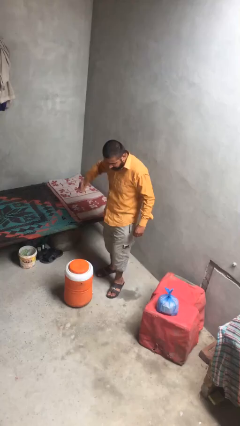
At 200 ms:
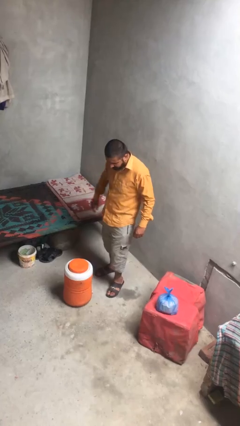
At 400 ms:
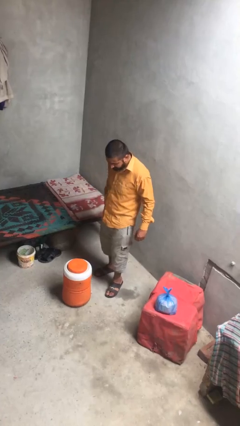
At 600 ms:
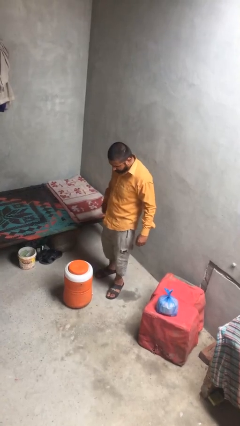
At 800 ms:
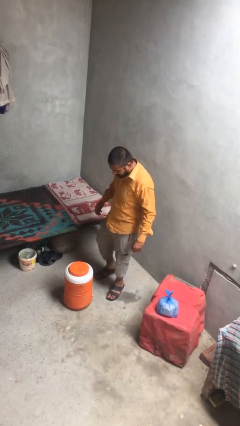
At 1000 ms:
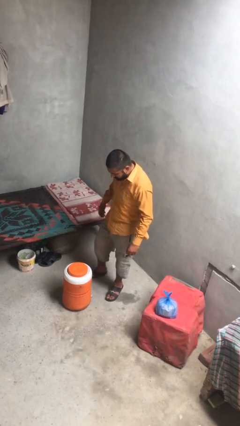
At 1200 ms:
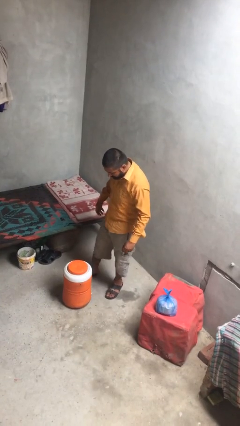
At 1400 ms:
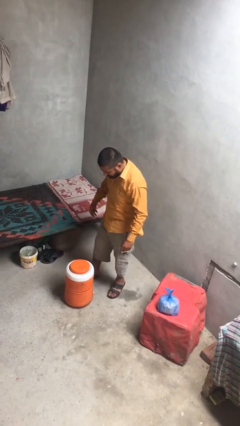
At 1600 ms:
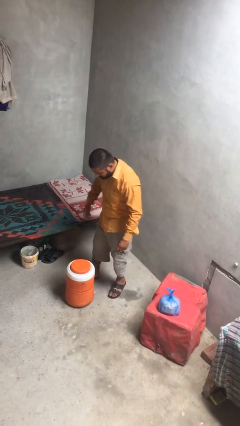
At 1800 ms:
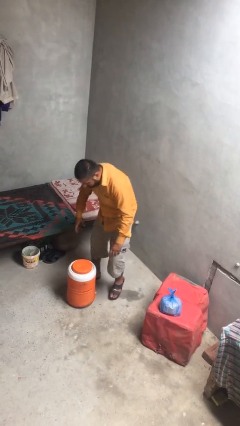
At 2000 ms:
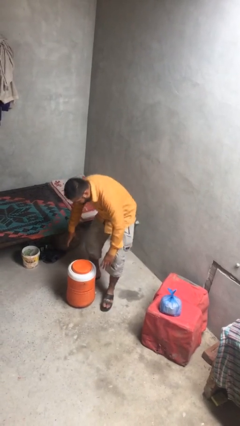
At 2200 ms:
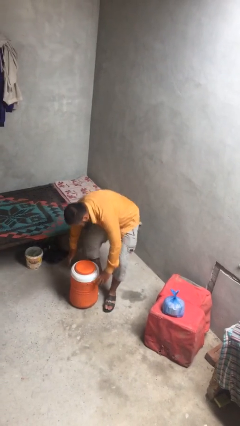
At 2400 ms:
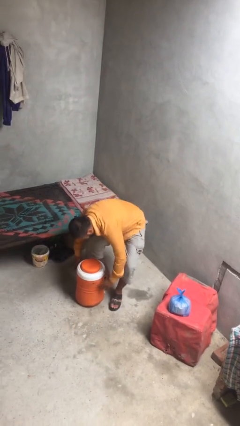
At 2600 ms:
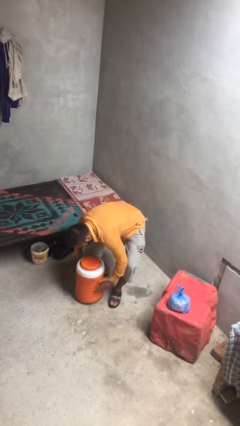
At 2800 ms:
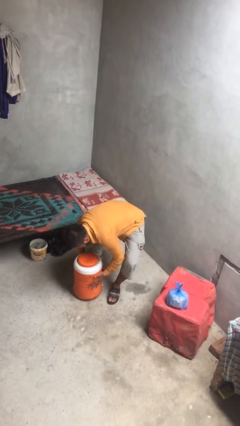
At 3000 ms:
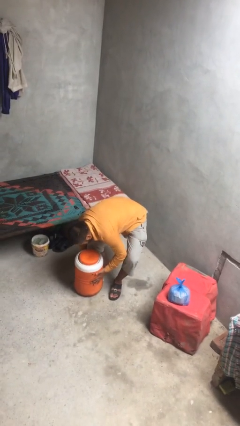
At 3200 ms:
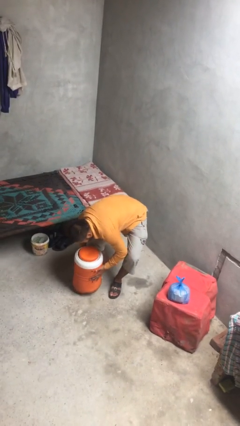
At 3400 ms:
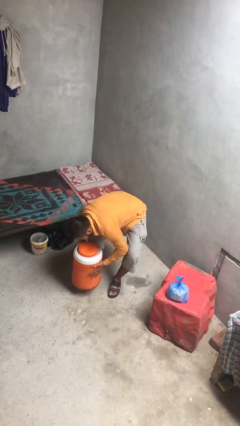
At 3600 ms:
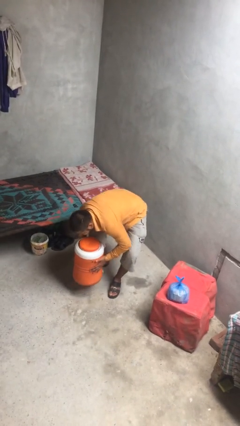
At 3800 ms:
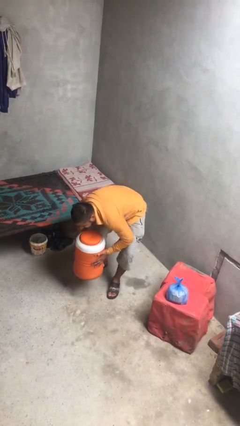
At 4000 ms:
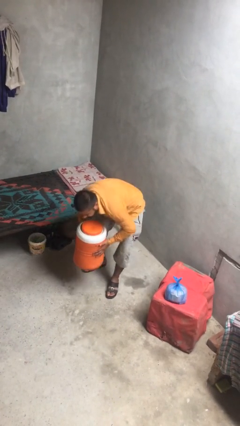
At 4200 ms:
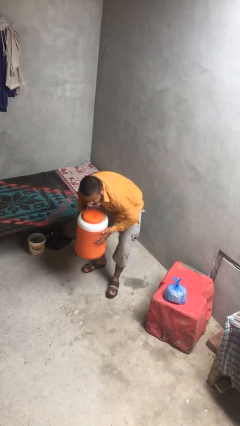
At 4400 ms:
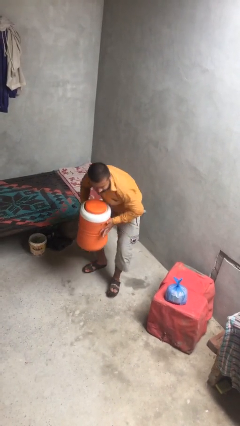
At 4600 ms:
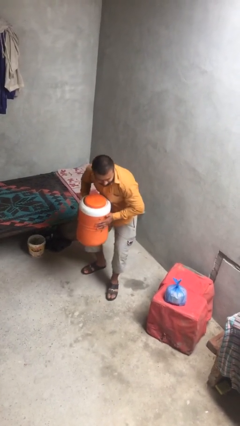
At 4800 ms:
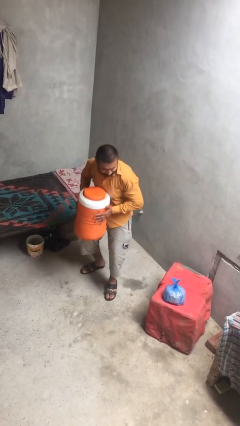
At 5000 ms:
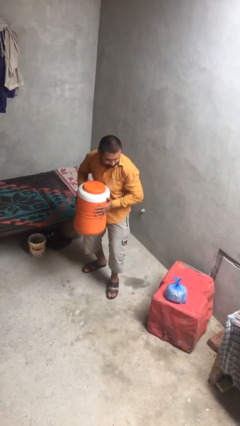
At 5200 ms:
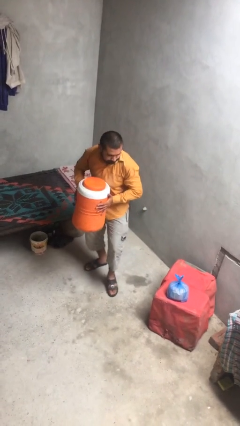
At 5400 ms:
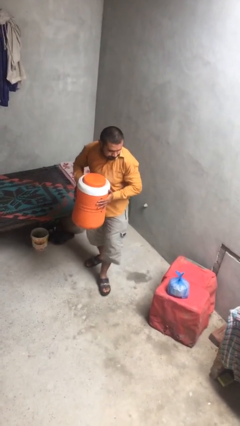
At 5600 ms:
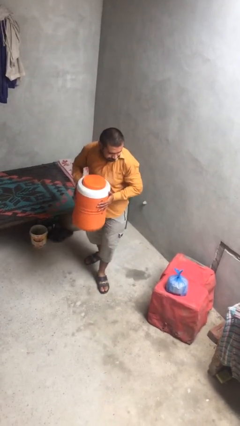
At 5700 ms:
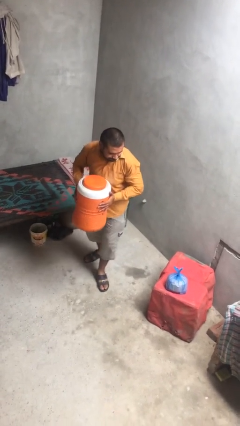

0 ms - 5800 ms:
person picks up object from floor

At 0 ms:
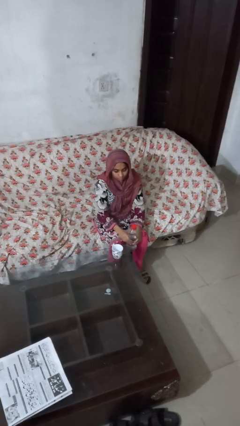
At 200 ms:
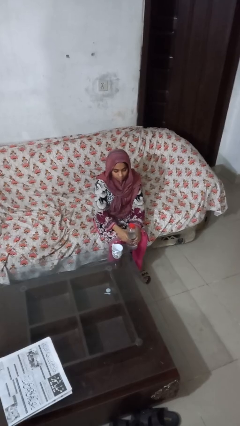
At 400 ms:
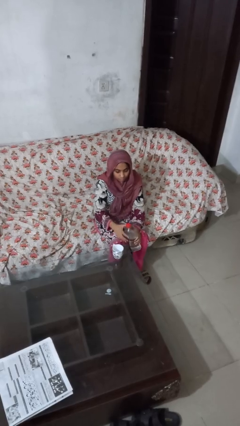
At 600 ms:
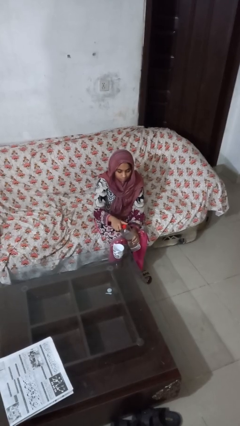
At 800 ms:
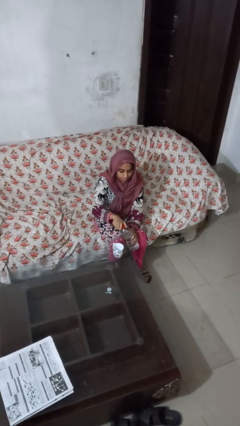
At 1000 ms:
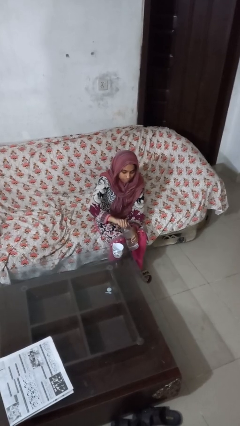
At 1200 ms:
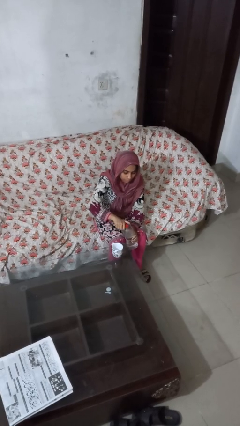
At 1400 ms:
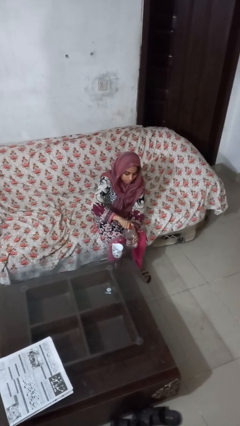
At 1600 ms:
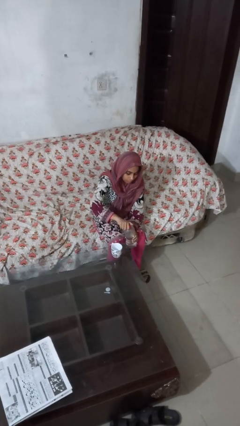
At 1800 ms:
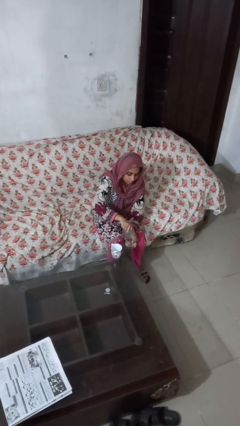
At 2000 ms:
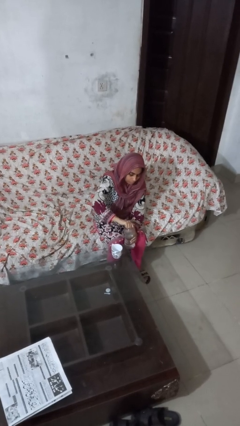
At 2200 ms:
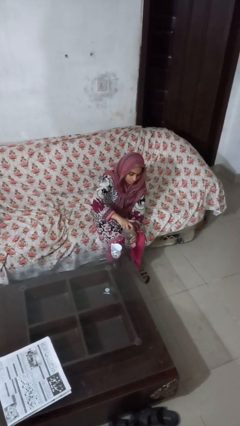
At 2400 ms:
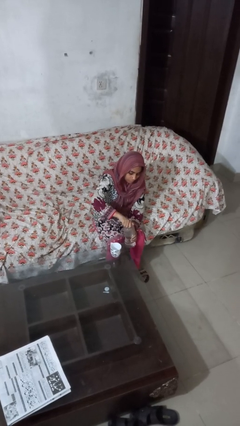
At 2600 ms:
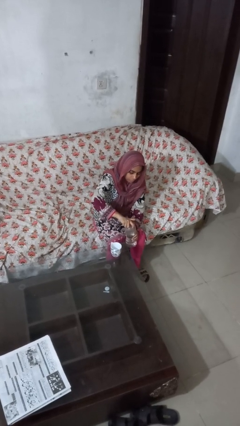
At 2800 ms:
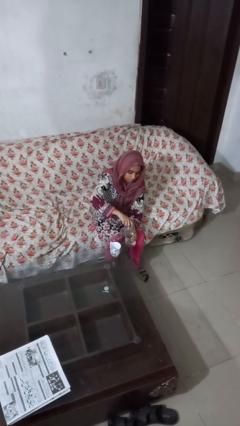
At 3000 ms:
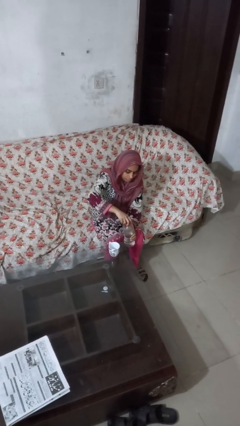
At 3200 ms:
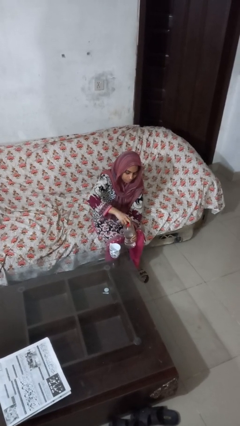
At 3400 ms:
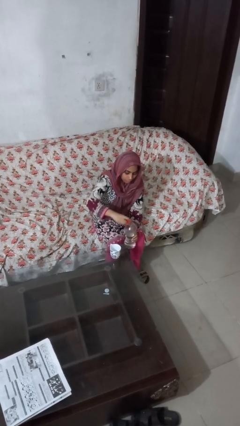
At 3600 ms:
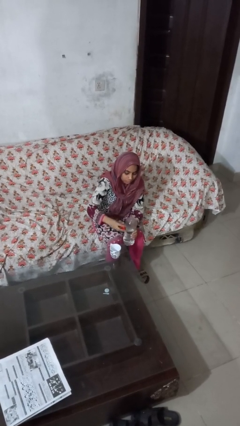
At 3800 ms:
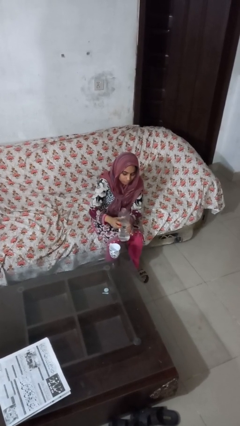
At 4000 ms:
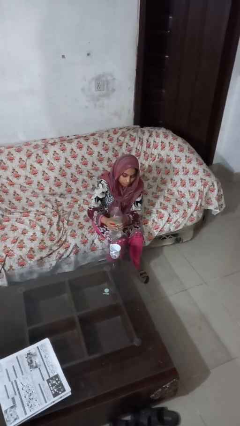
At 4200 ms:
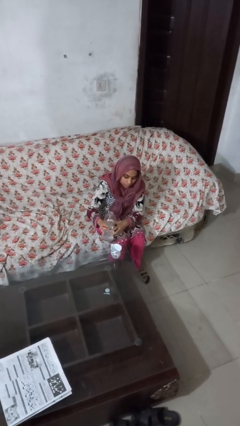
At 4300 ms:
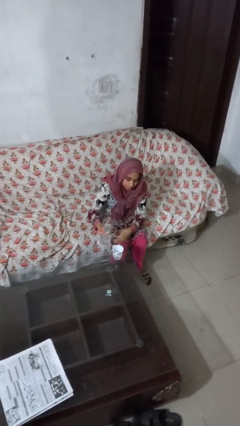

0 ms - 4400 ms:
person unscrews lid from bottle

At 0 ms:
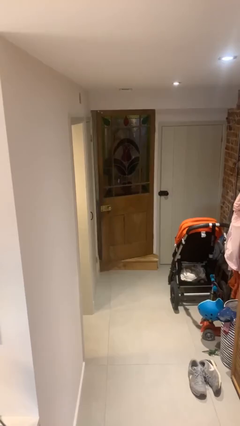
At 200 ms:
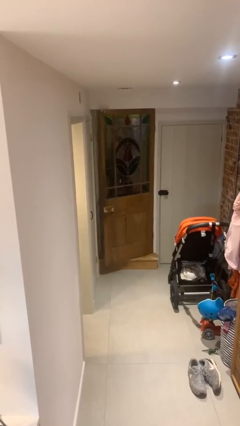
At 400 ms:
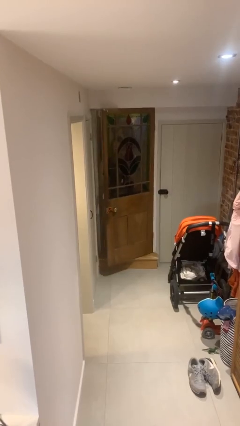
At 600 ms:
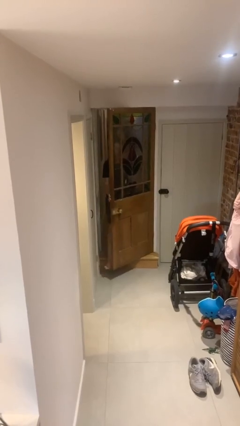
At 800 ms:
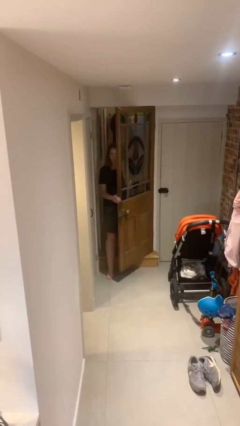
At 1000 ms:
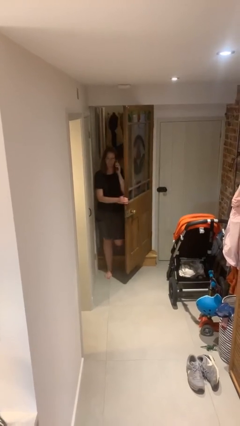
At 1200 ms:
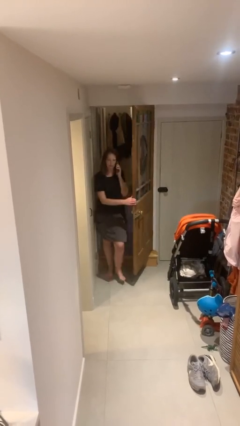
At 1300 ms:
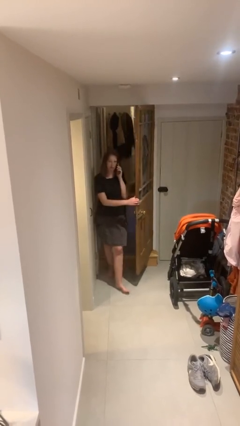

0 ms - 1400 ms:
person opens facility door

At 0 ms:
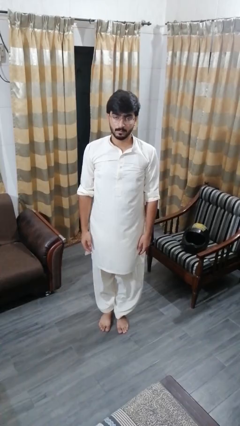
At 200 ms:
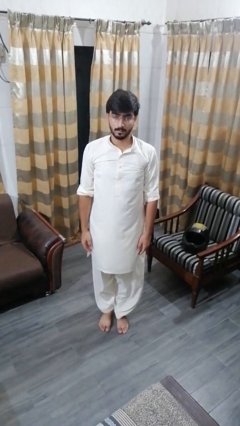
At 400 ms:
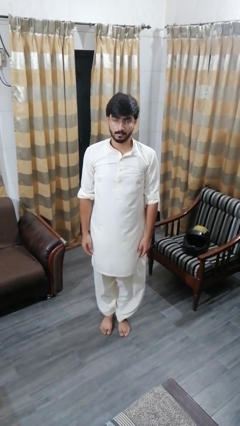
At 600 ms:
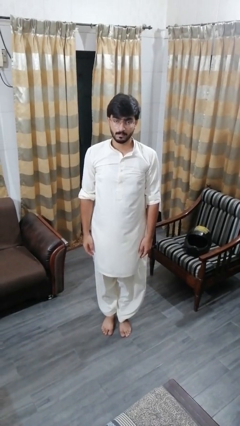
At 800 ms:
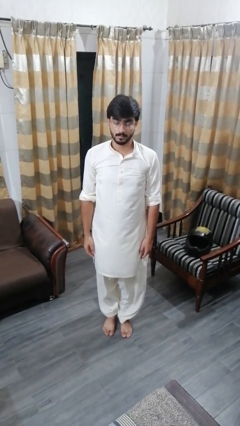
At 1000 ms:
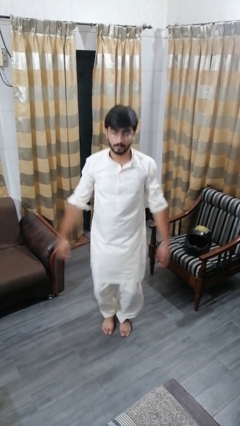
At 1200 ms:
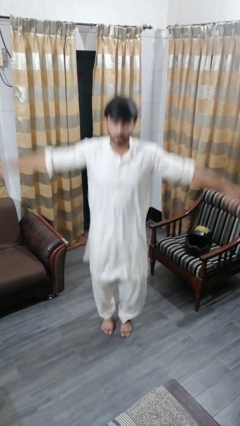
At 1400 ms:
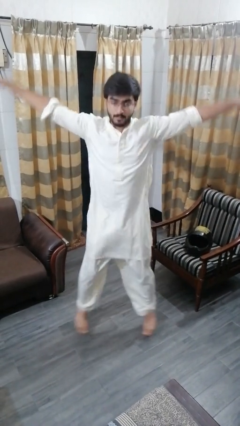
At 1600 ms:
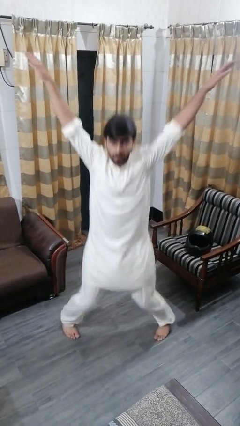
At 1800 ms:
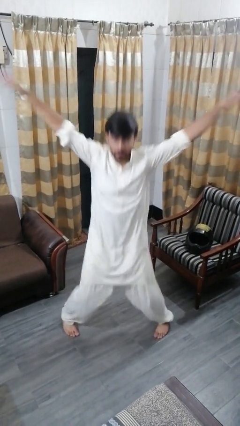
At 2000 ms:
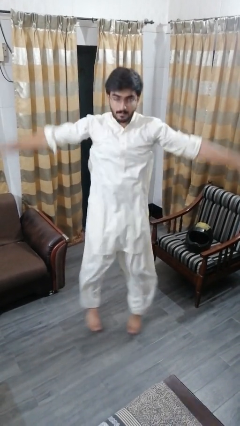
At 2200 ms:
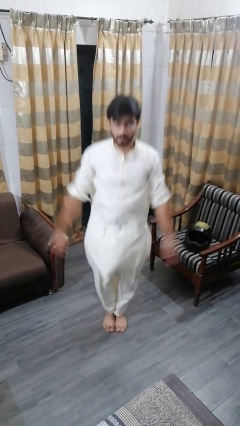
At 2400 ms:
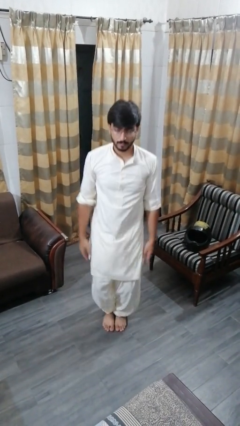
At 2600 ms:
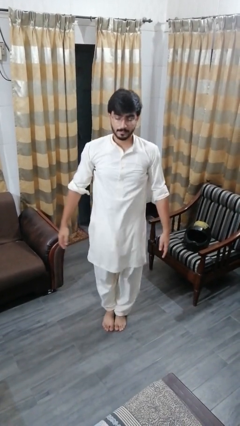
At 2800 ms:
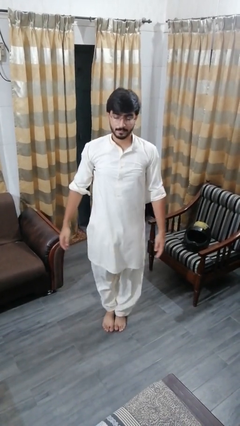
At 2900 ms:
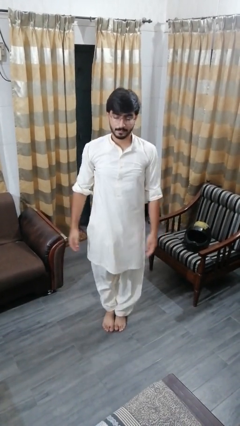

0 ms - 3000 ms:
person exercises with jumping jacks

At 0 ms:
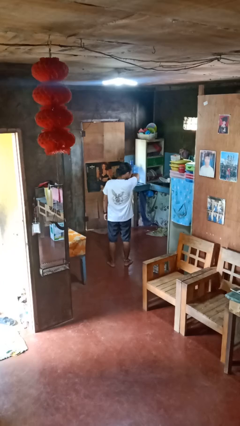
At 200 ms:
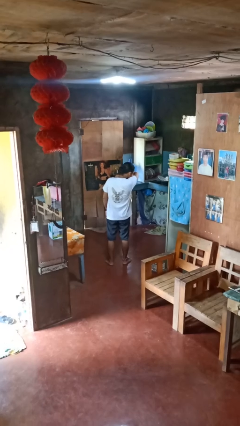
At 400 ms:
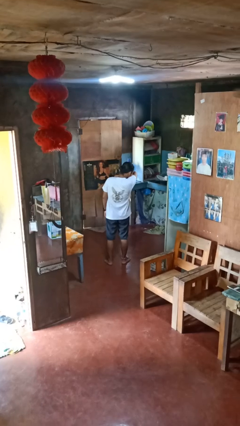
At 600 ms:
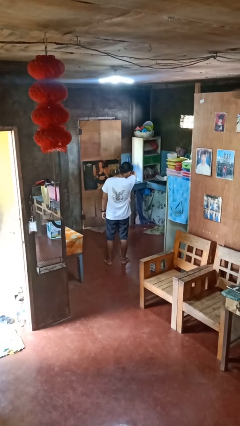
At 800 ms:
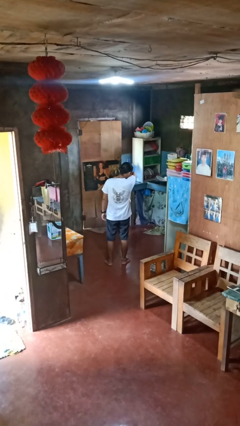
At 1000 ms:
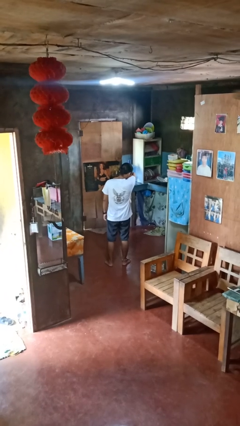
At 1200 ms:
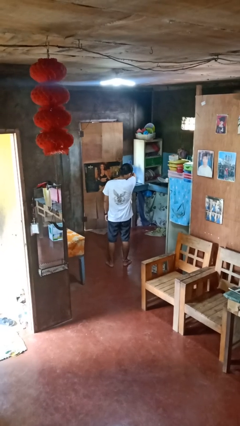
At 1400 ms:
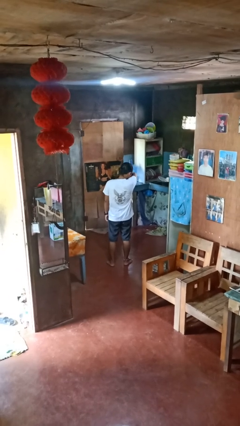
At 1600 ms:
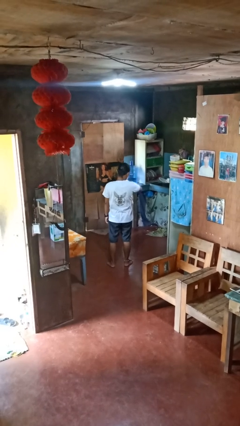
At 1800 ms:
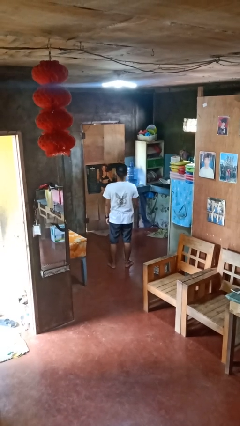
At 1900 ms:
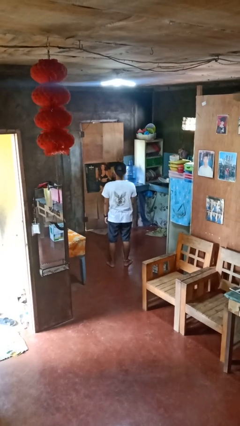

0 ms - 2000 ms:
person sneezes into arm

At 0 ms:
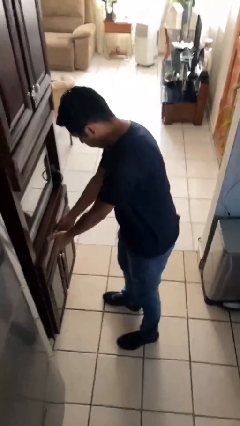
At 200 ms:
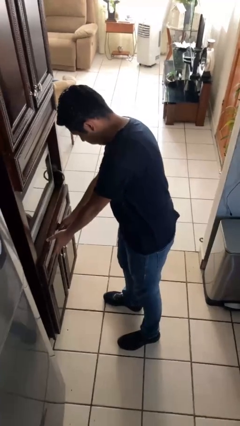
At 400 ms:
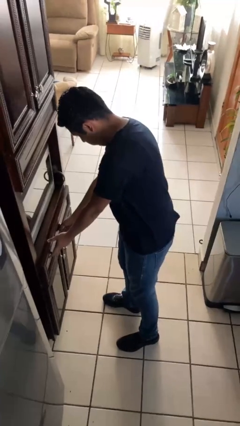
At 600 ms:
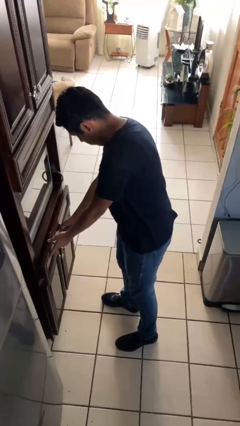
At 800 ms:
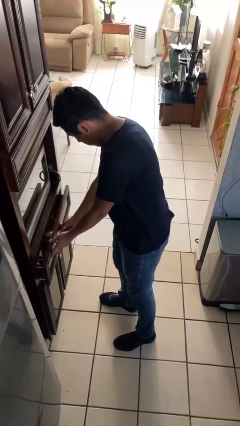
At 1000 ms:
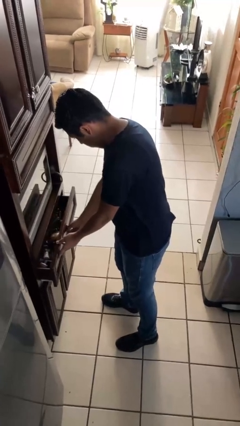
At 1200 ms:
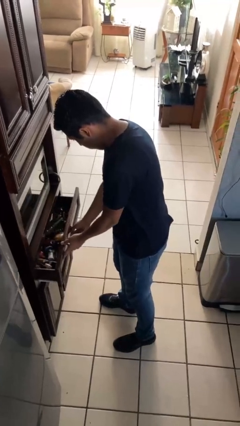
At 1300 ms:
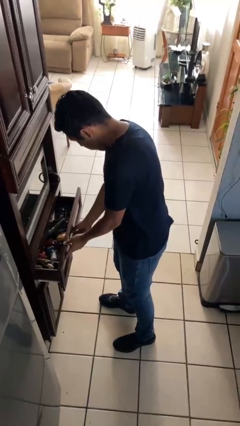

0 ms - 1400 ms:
person opens kitchen drawer
